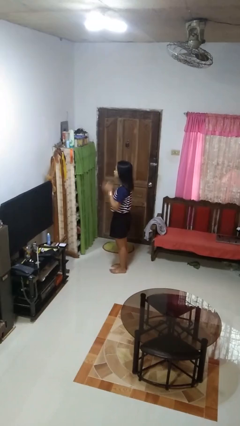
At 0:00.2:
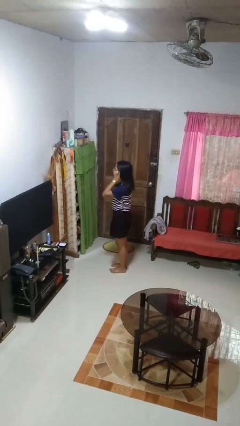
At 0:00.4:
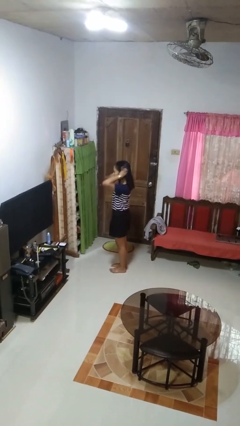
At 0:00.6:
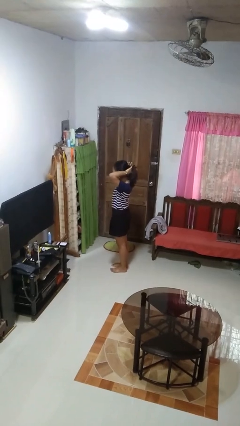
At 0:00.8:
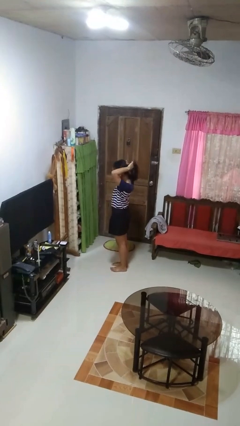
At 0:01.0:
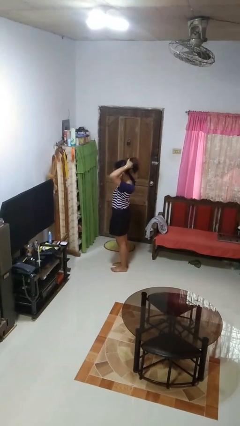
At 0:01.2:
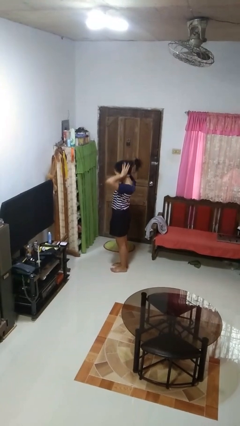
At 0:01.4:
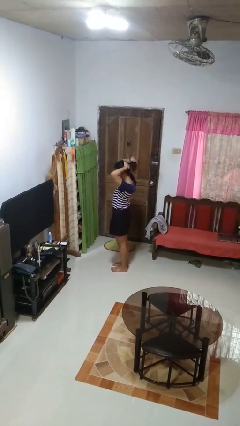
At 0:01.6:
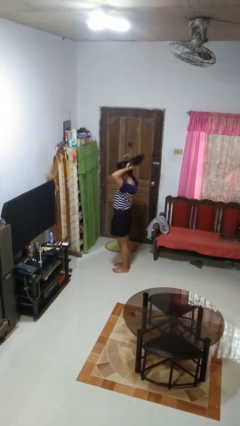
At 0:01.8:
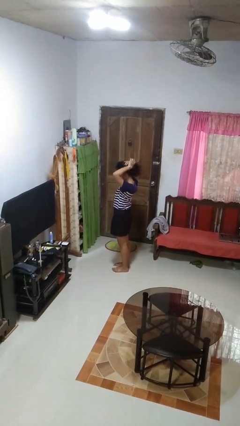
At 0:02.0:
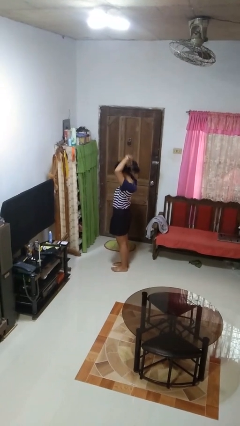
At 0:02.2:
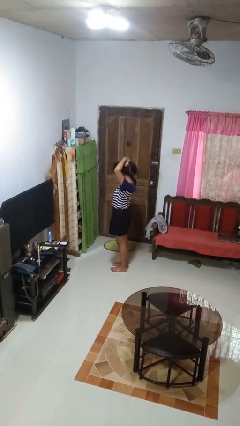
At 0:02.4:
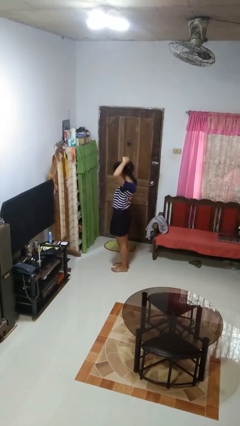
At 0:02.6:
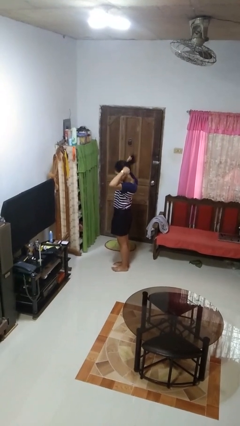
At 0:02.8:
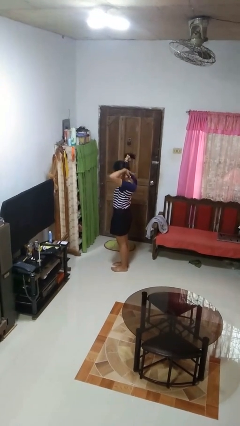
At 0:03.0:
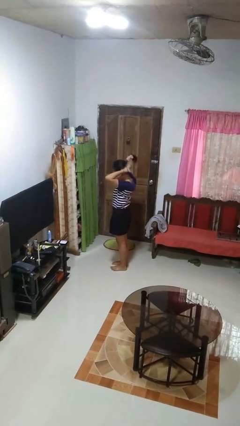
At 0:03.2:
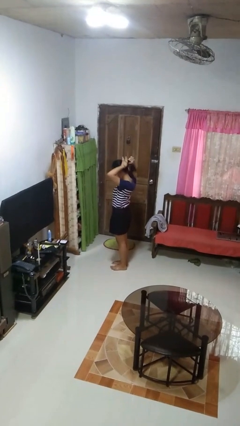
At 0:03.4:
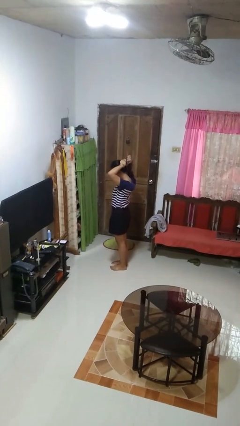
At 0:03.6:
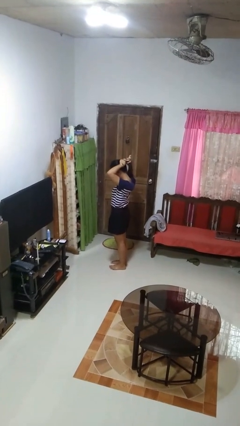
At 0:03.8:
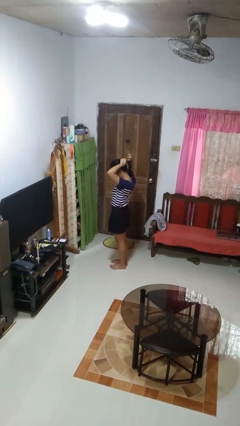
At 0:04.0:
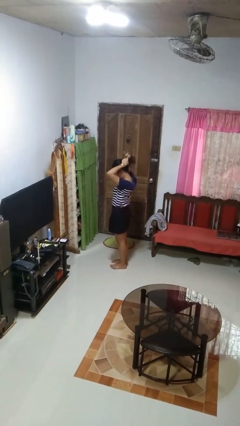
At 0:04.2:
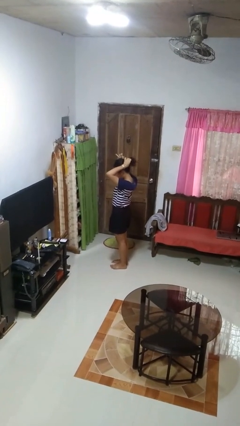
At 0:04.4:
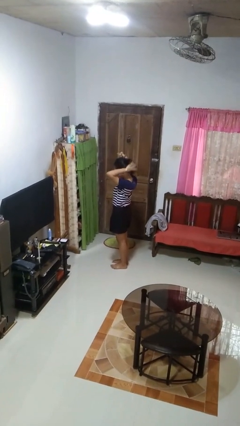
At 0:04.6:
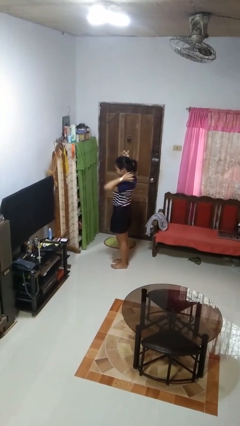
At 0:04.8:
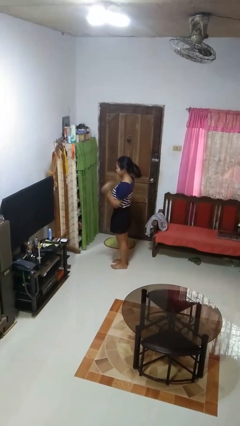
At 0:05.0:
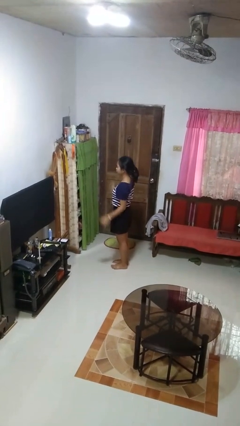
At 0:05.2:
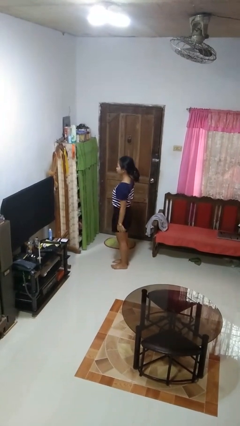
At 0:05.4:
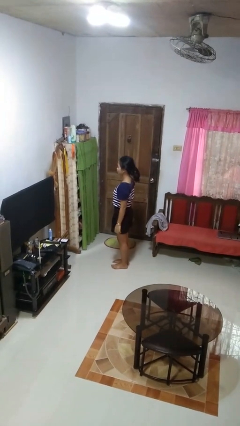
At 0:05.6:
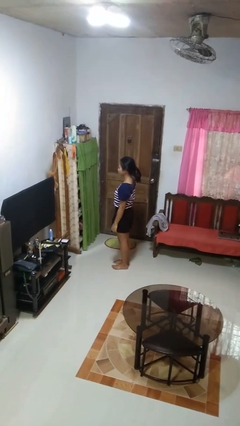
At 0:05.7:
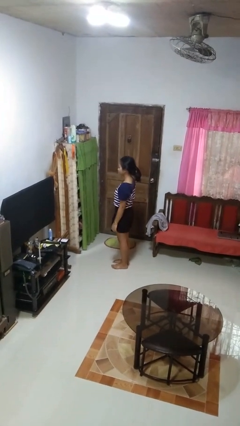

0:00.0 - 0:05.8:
person puts hair in ponytail

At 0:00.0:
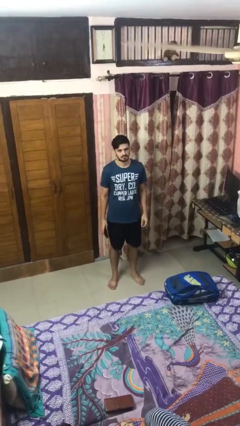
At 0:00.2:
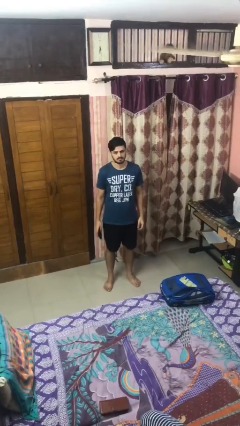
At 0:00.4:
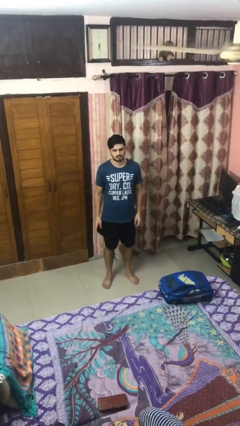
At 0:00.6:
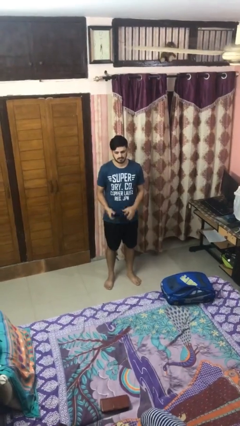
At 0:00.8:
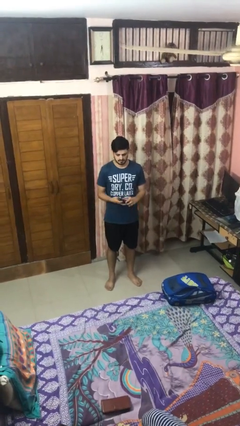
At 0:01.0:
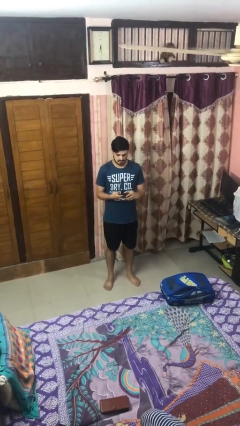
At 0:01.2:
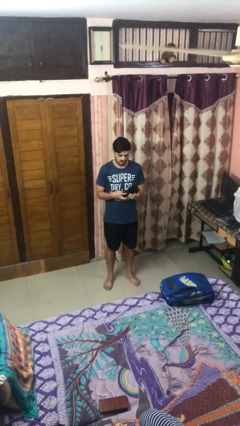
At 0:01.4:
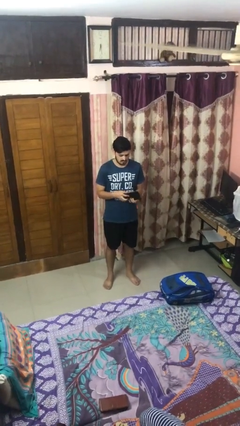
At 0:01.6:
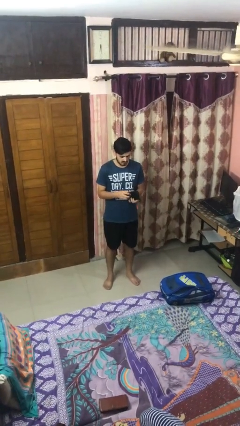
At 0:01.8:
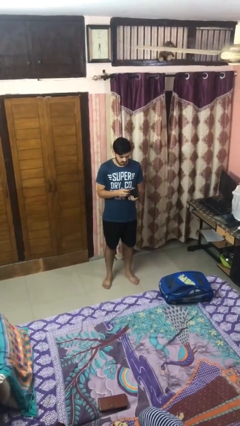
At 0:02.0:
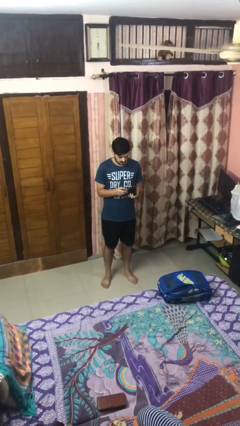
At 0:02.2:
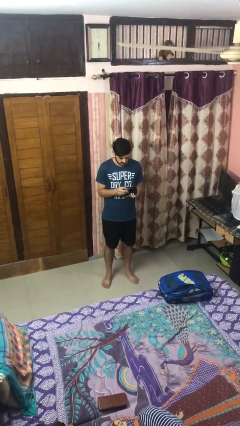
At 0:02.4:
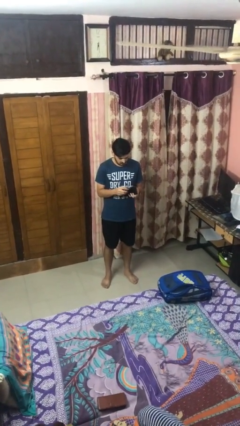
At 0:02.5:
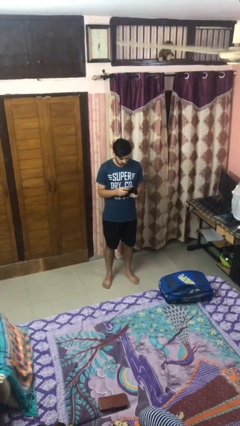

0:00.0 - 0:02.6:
person searches in purse

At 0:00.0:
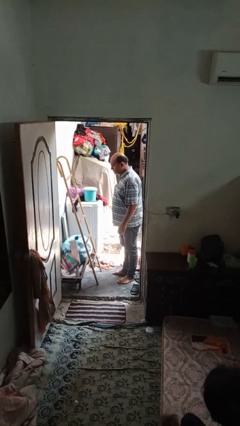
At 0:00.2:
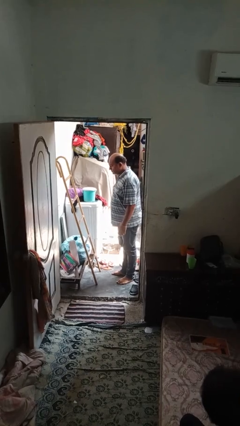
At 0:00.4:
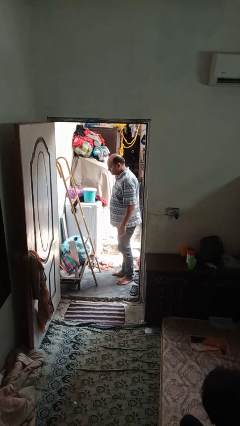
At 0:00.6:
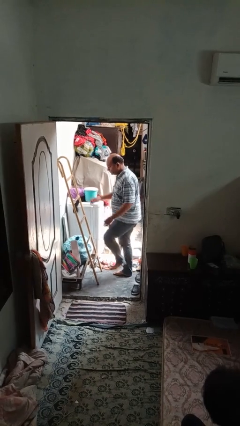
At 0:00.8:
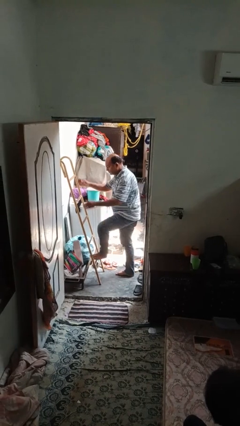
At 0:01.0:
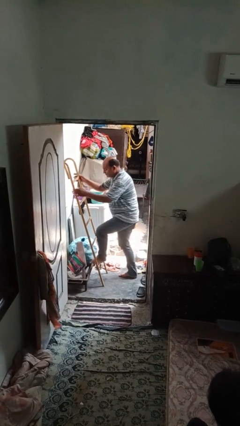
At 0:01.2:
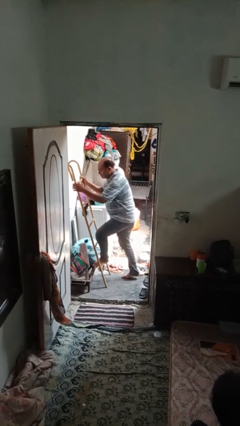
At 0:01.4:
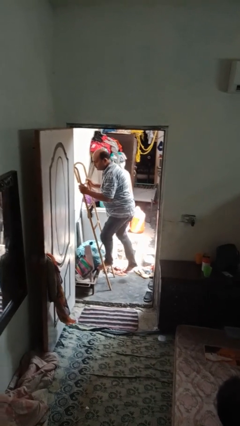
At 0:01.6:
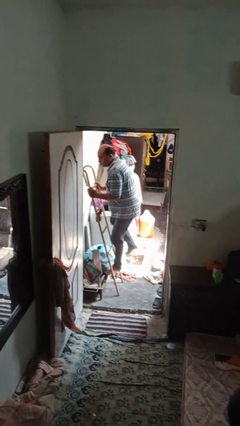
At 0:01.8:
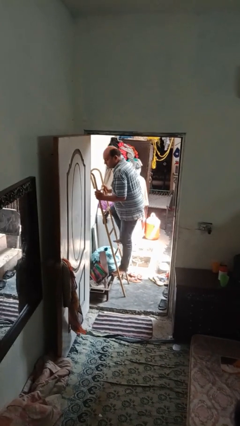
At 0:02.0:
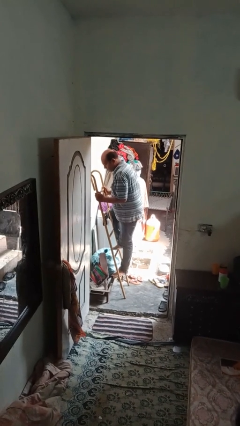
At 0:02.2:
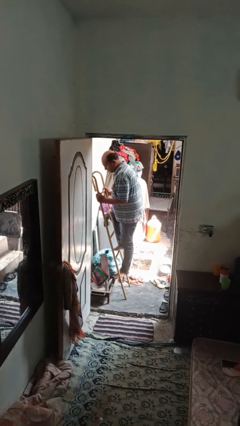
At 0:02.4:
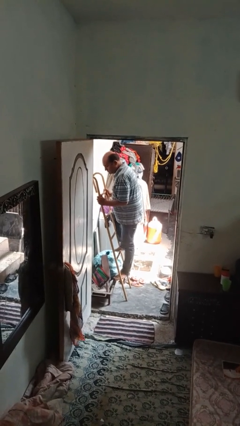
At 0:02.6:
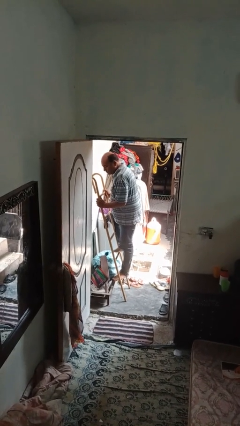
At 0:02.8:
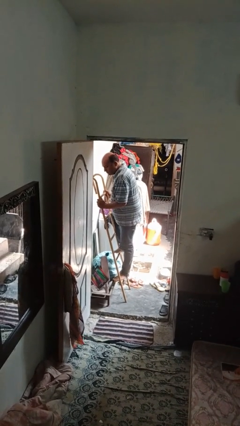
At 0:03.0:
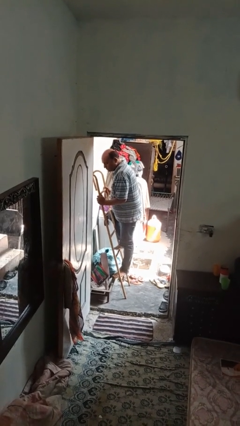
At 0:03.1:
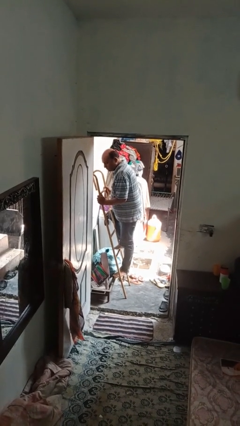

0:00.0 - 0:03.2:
person climbs up ladder

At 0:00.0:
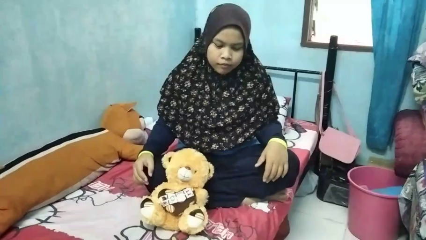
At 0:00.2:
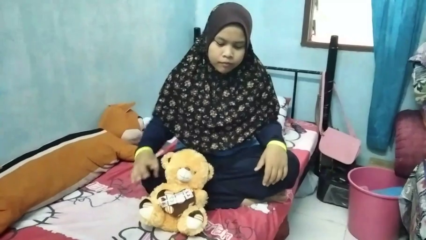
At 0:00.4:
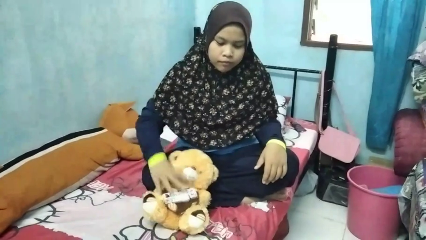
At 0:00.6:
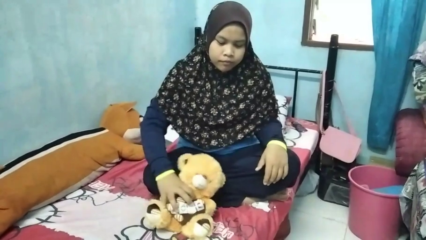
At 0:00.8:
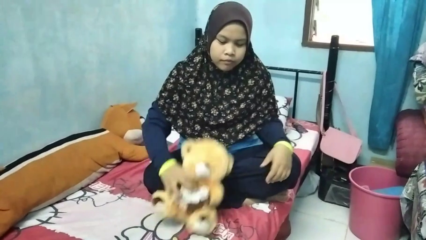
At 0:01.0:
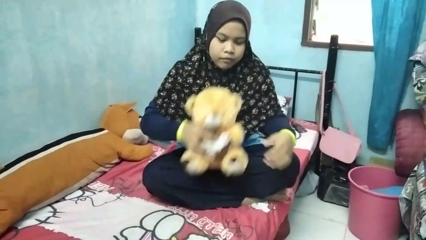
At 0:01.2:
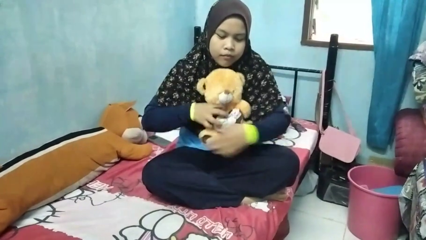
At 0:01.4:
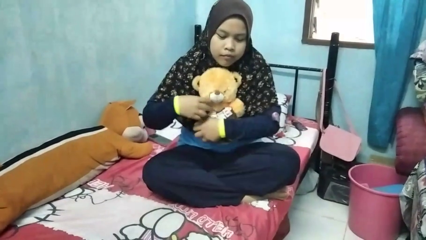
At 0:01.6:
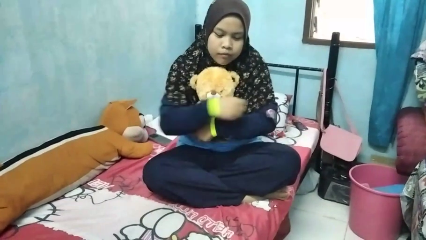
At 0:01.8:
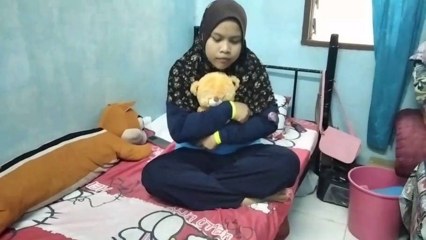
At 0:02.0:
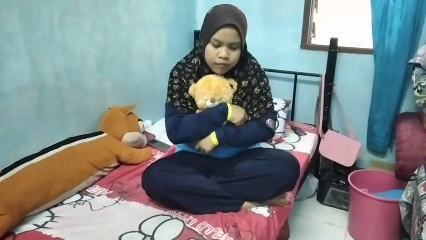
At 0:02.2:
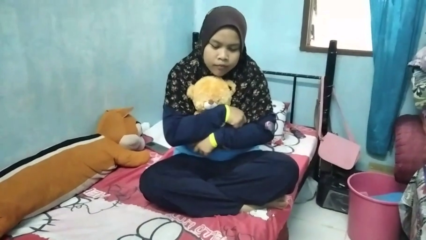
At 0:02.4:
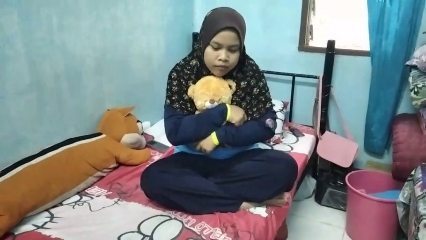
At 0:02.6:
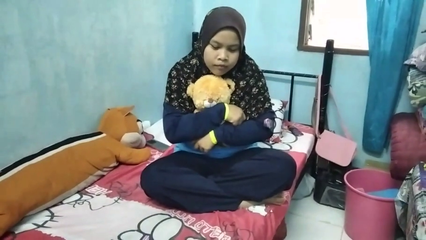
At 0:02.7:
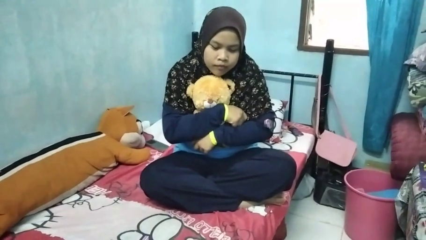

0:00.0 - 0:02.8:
person hugs stuffed animal

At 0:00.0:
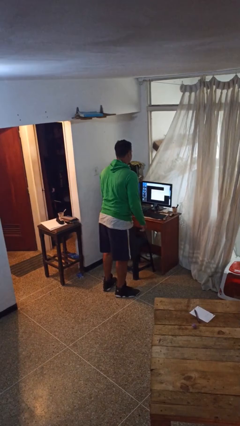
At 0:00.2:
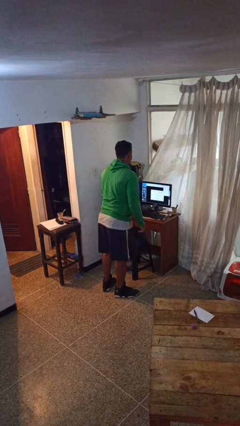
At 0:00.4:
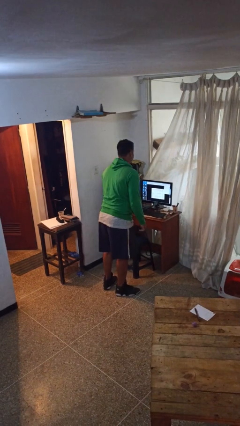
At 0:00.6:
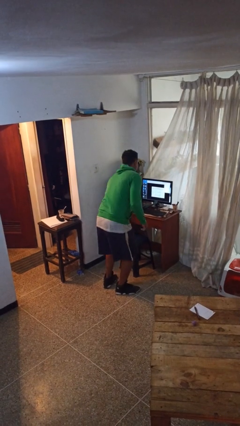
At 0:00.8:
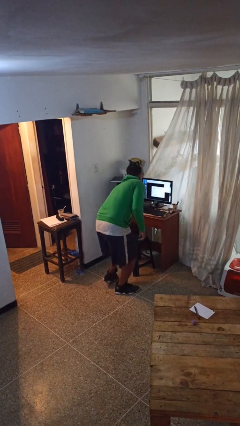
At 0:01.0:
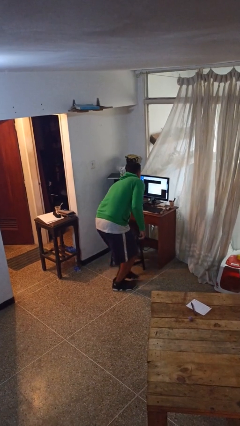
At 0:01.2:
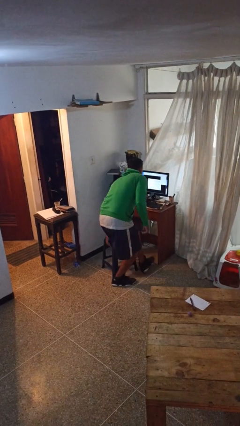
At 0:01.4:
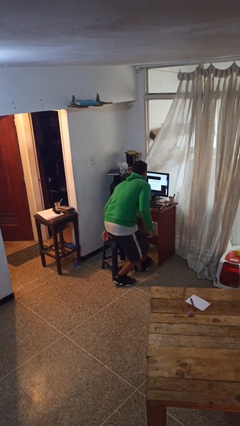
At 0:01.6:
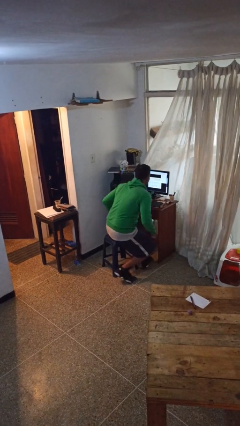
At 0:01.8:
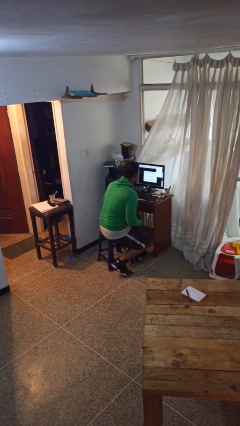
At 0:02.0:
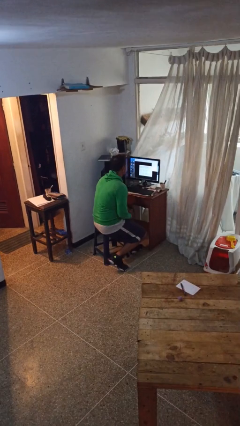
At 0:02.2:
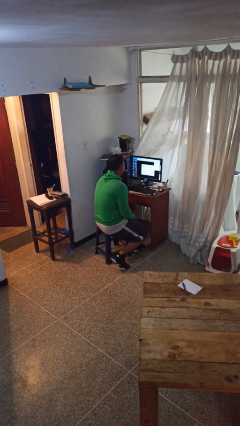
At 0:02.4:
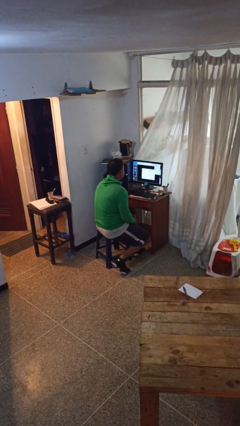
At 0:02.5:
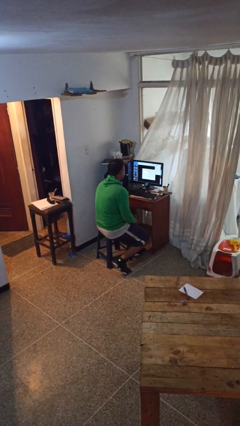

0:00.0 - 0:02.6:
person sits down

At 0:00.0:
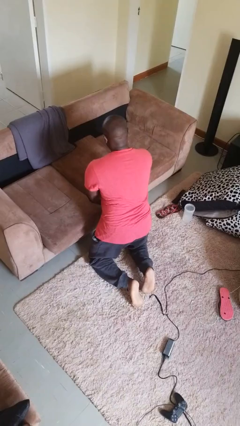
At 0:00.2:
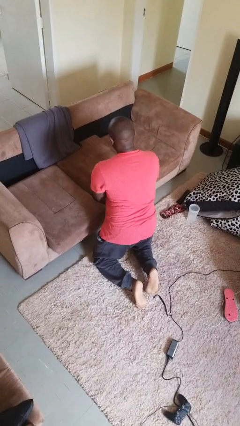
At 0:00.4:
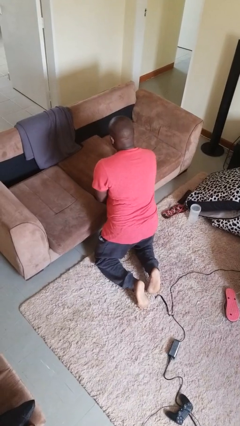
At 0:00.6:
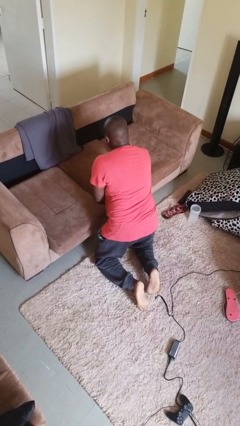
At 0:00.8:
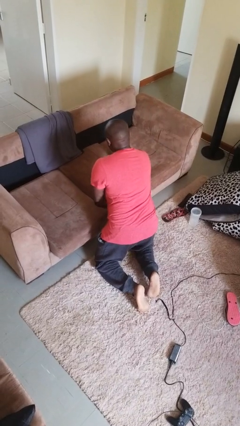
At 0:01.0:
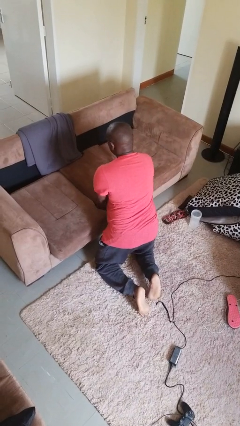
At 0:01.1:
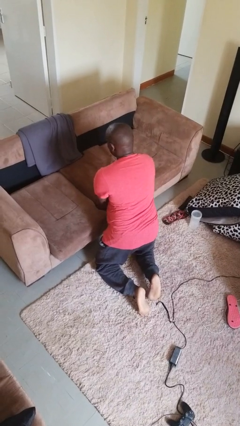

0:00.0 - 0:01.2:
person searches under couch
